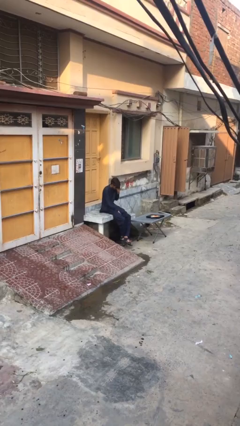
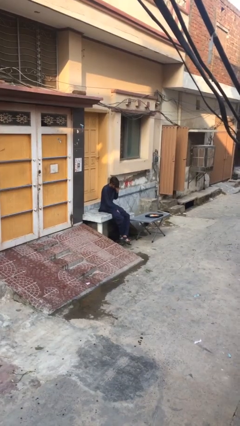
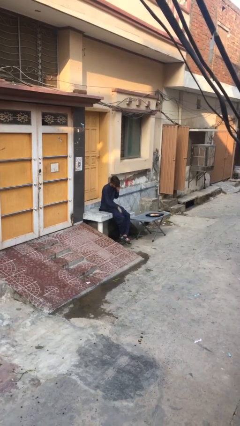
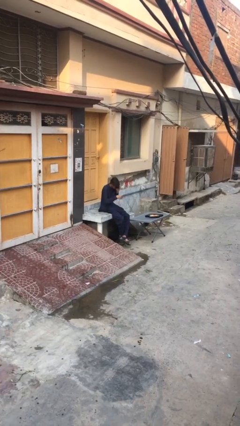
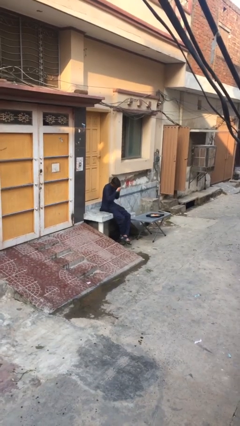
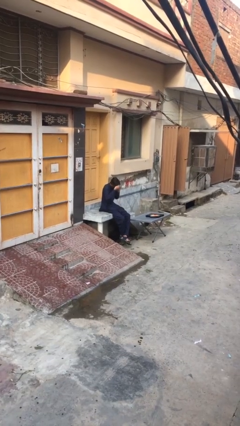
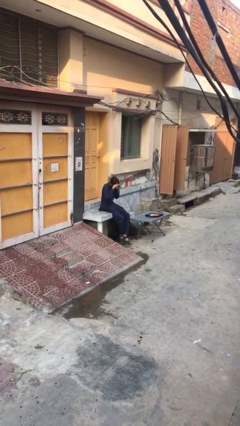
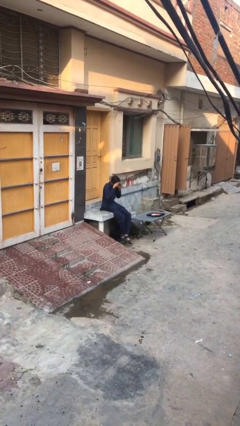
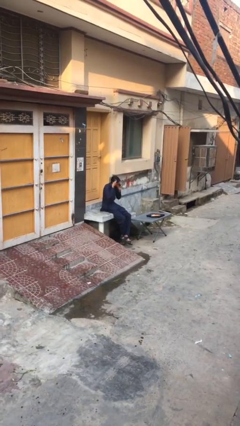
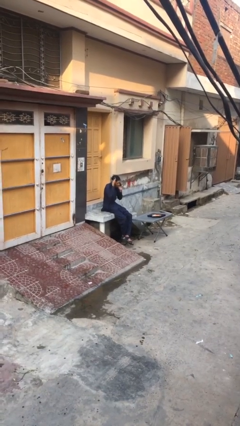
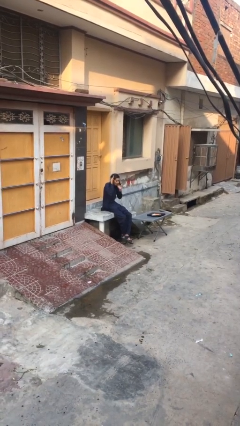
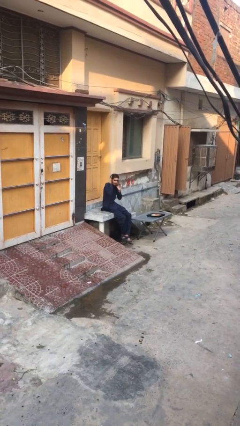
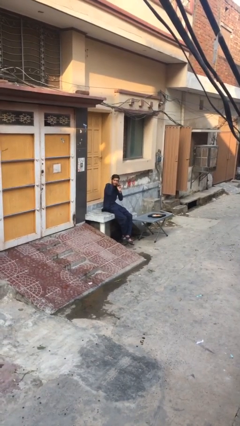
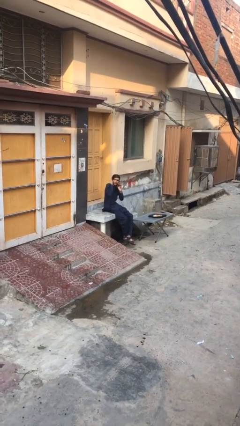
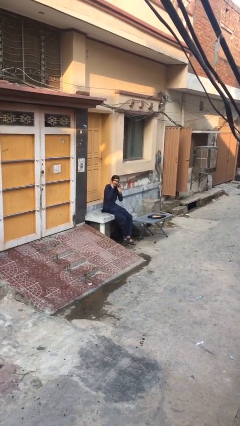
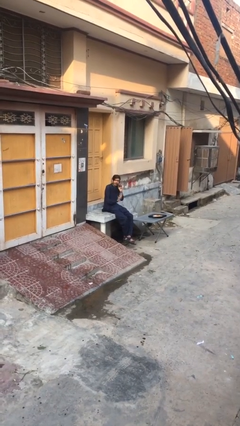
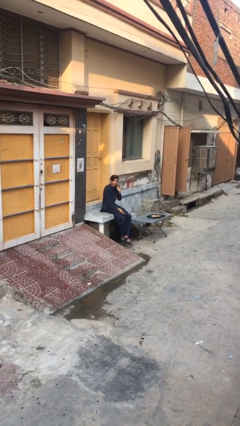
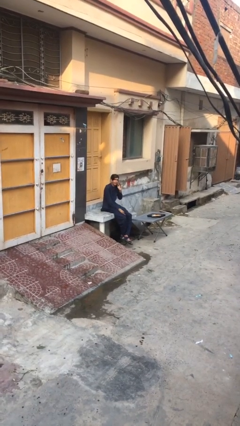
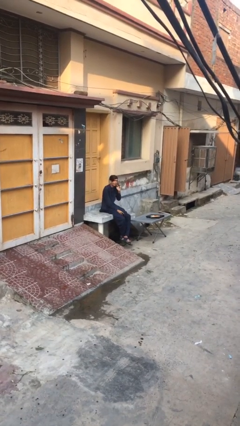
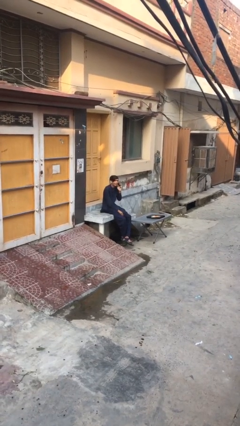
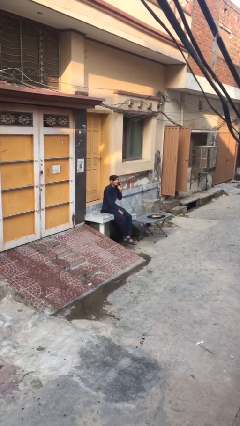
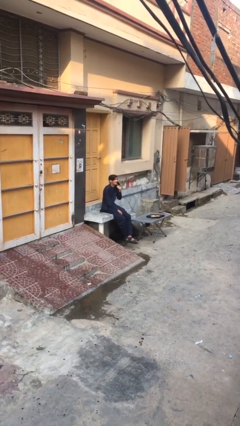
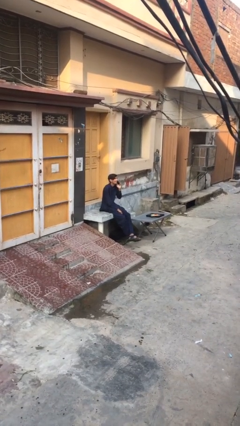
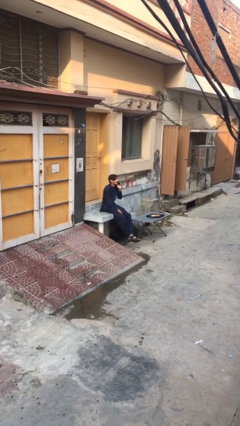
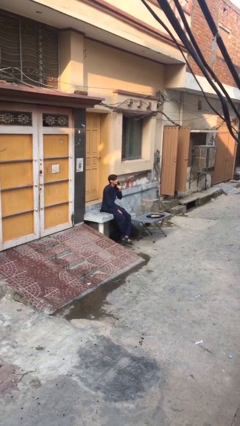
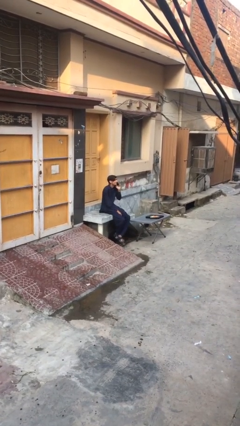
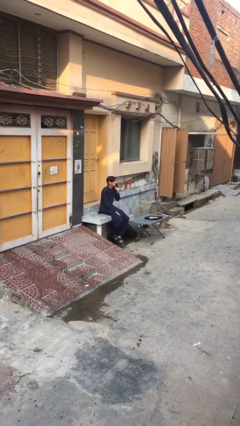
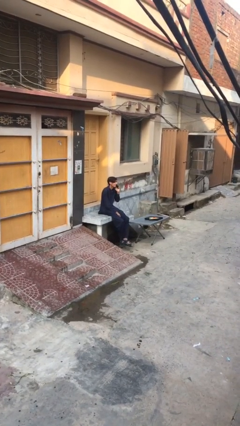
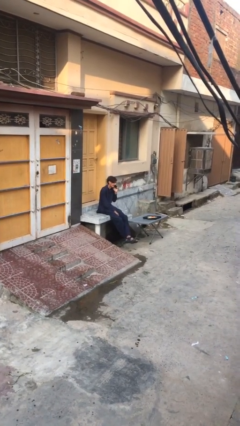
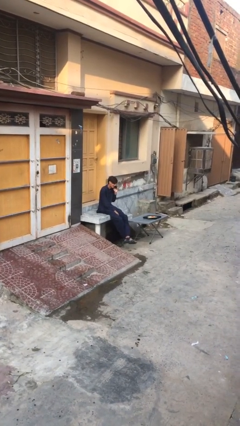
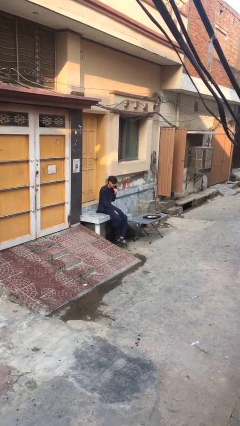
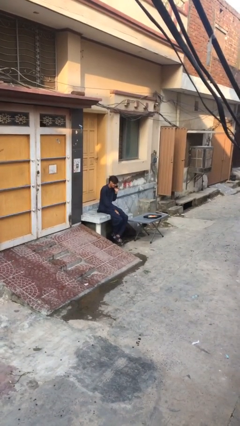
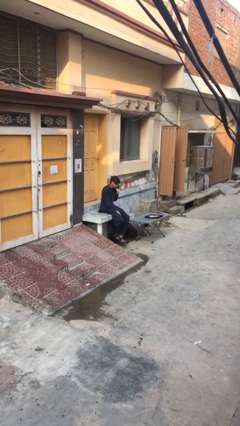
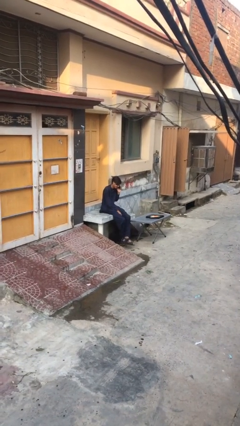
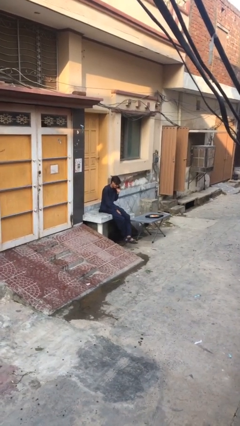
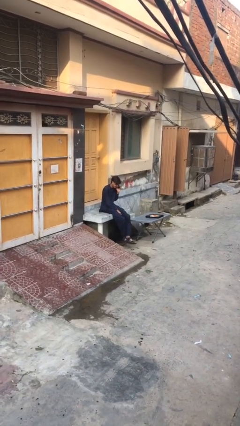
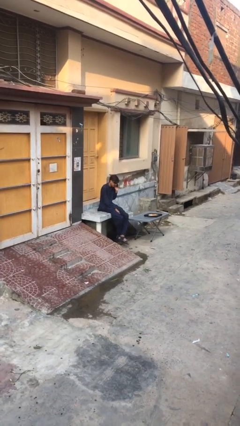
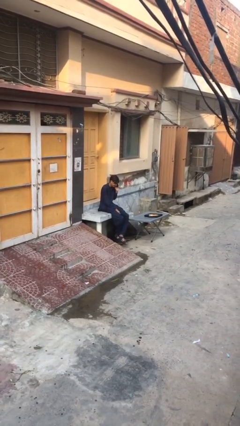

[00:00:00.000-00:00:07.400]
person talks on phone

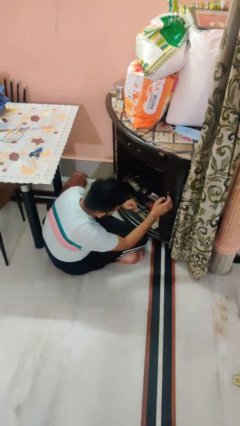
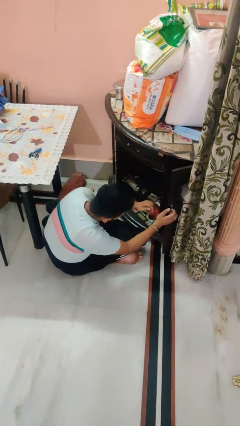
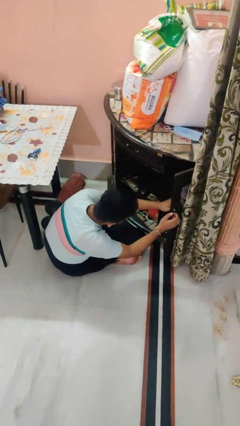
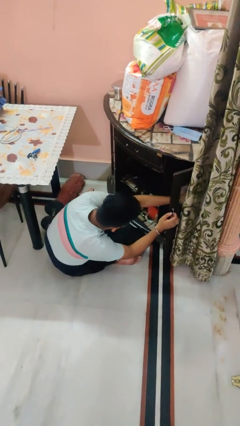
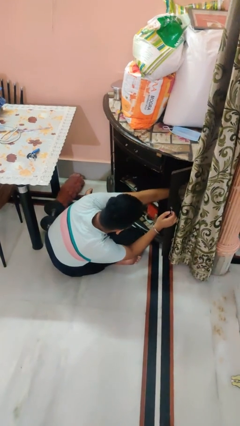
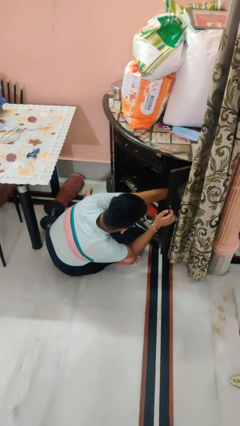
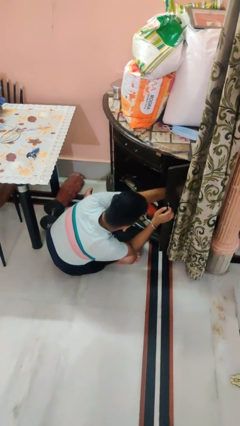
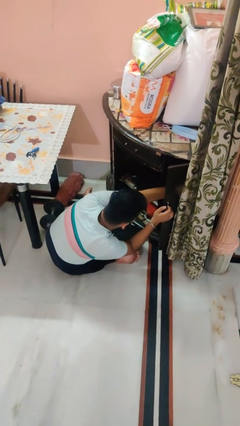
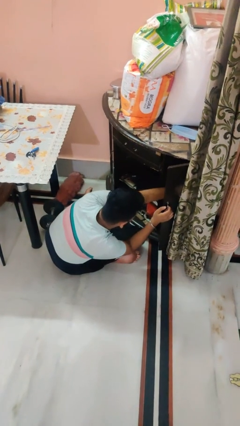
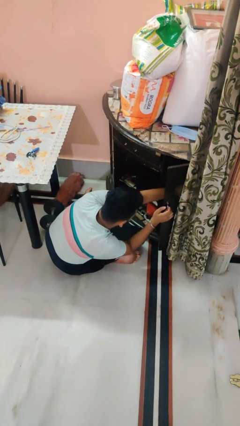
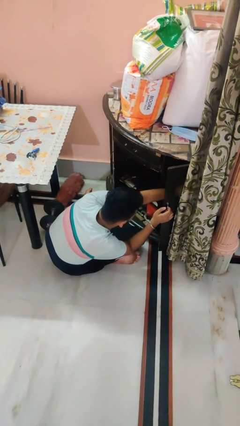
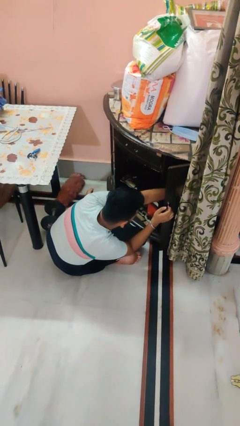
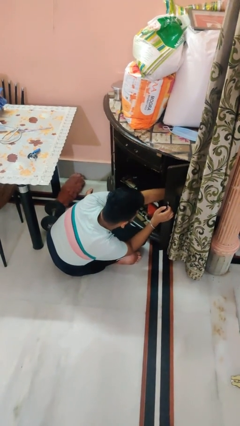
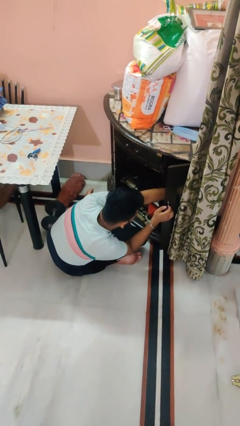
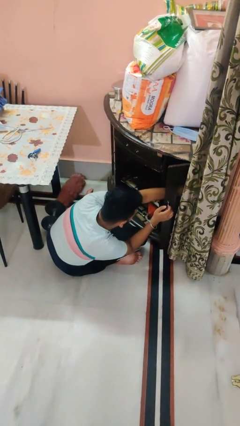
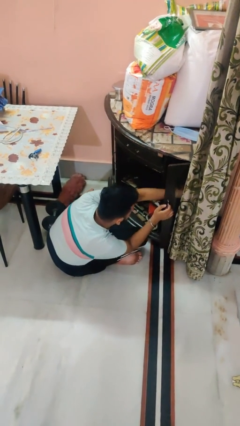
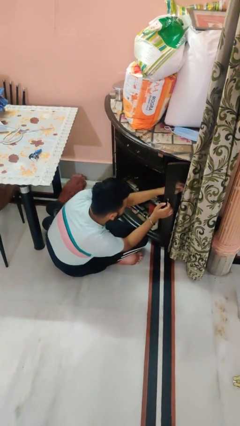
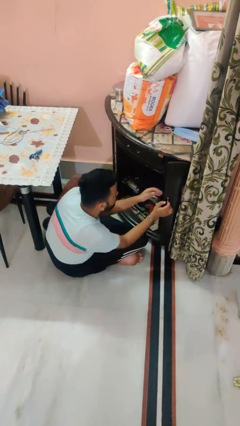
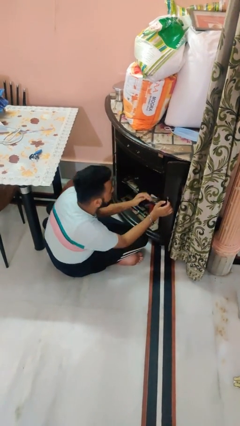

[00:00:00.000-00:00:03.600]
person searches in cabinet

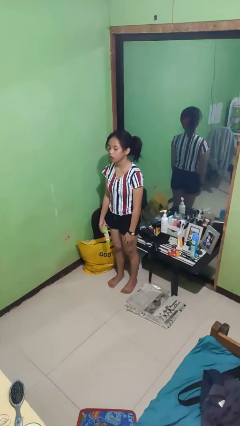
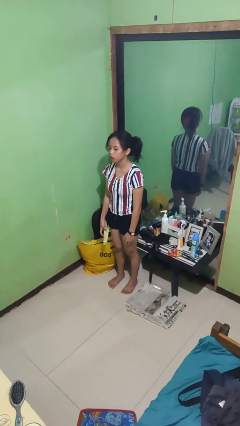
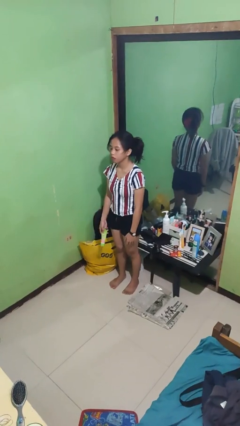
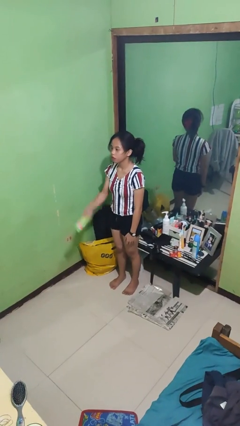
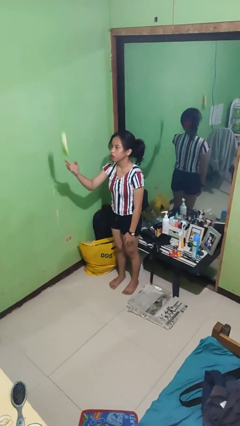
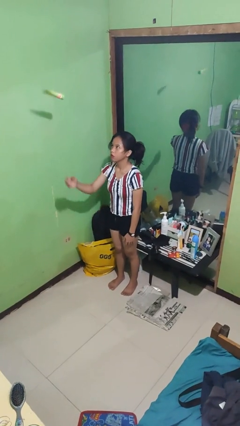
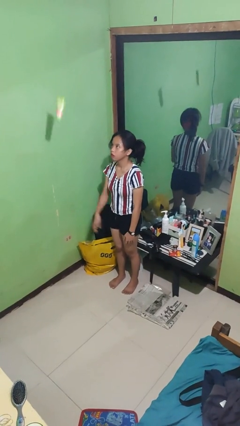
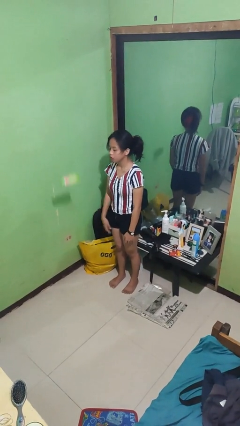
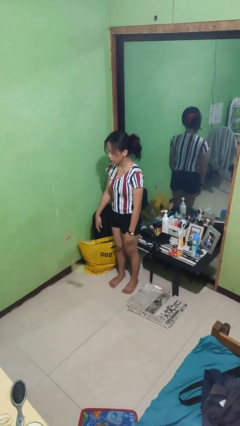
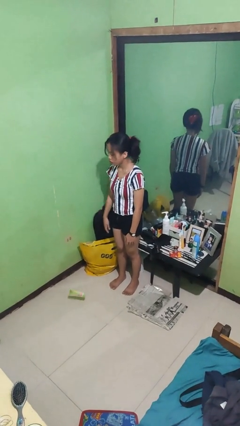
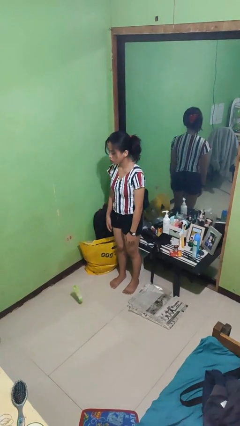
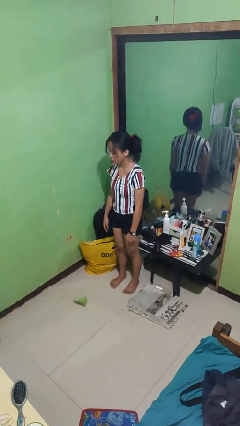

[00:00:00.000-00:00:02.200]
person throws object into air

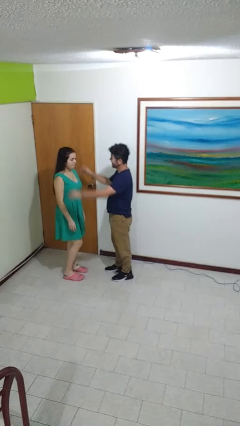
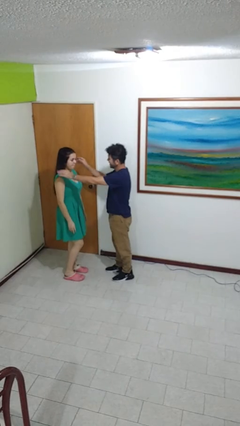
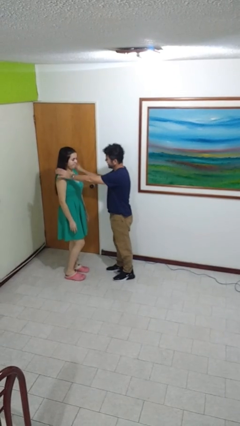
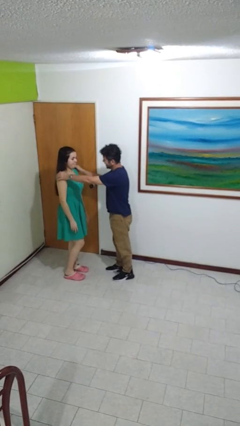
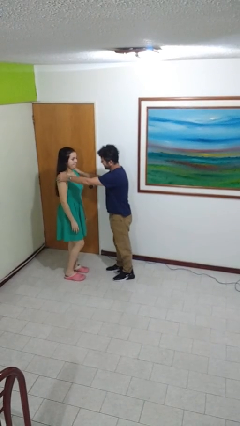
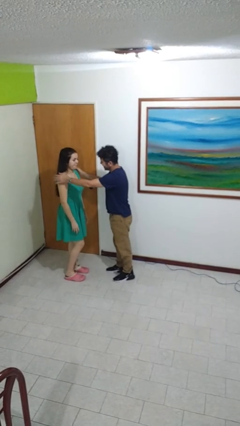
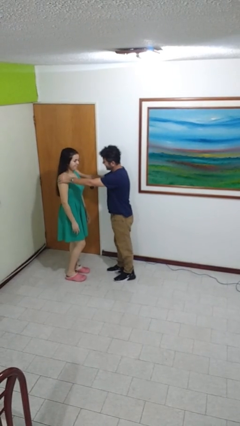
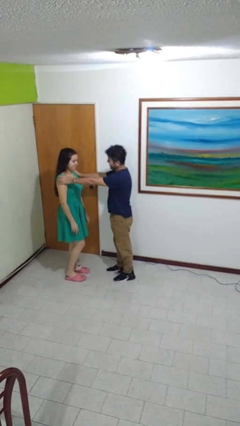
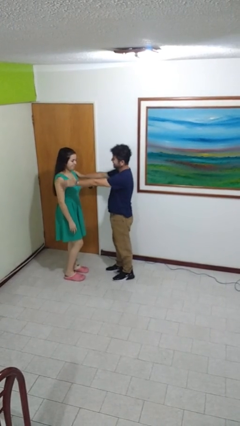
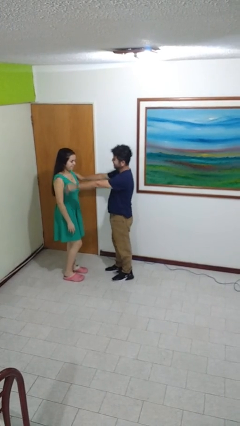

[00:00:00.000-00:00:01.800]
person pounds shoulders of person

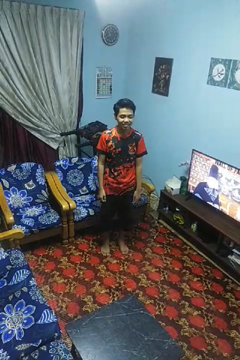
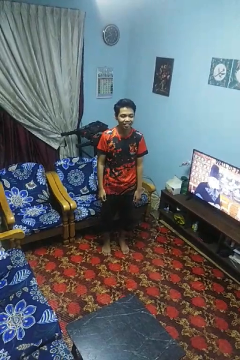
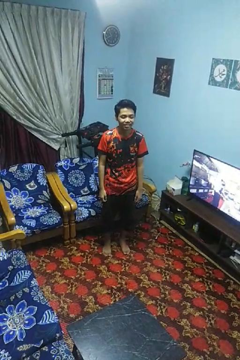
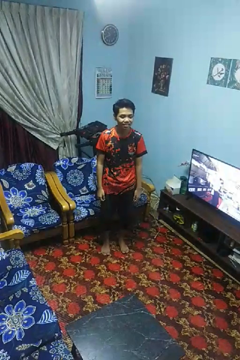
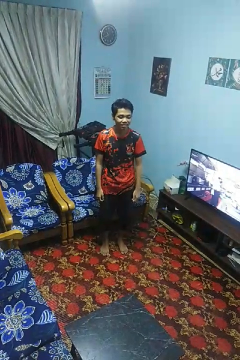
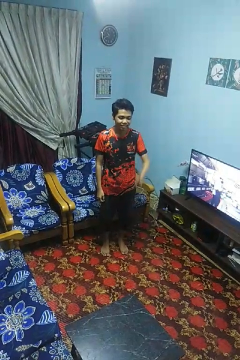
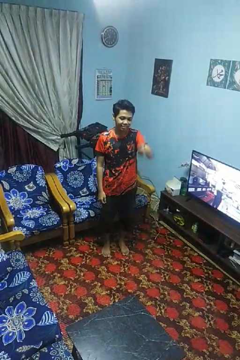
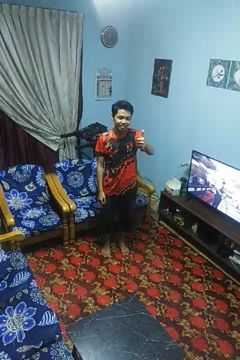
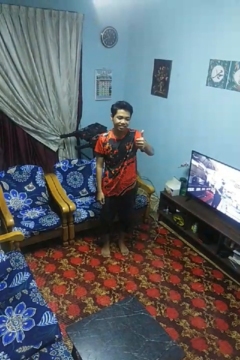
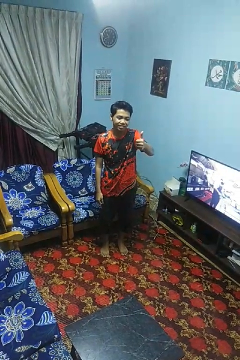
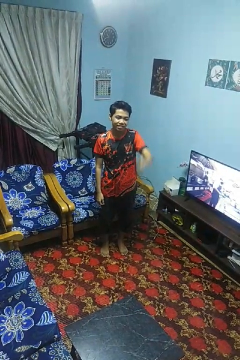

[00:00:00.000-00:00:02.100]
person gestures thumbs up

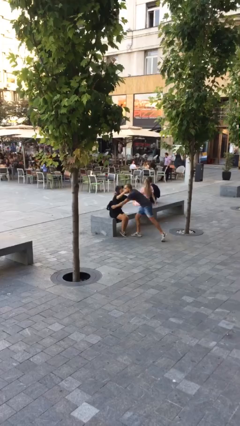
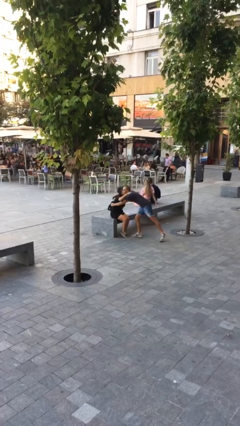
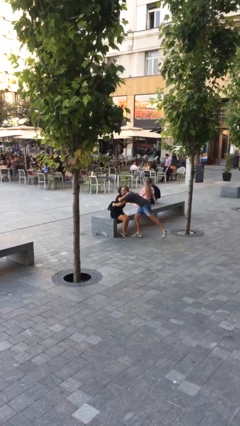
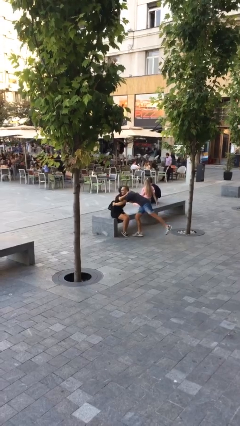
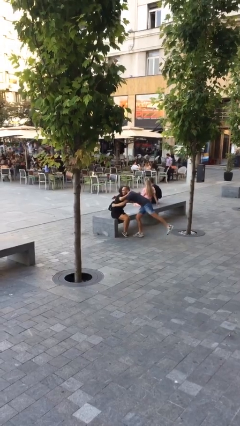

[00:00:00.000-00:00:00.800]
person embraces person
